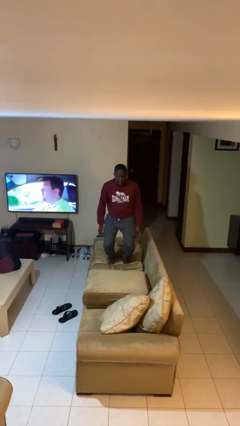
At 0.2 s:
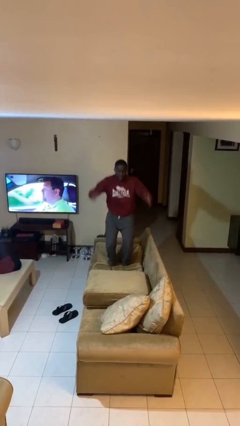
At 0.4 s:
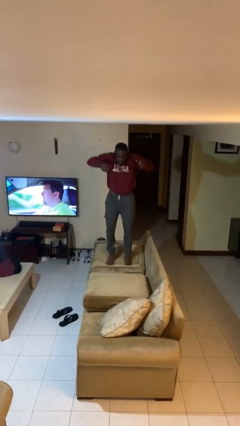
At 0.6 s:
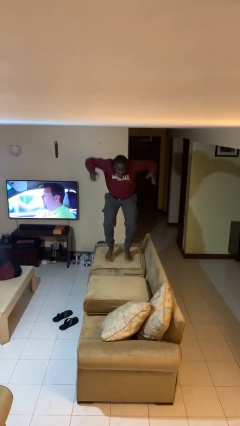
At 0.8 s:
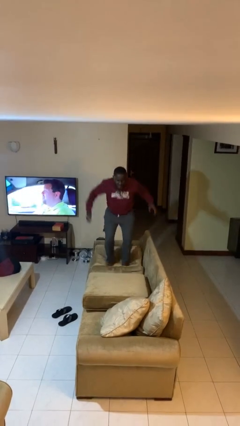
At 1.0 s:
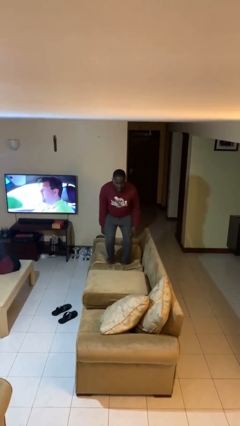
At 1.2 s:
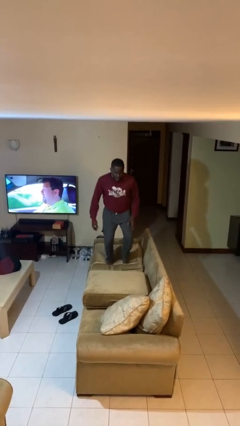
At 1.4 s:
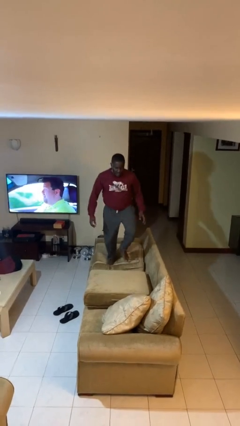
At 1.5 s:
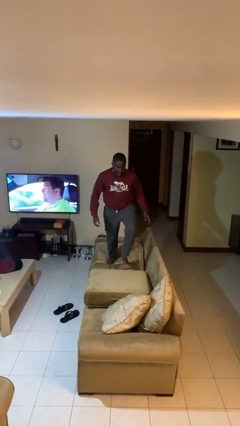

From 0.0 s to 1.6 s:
person jumps on couch

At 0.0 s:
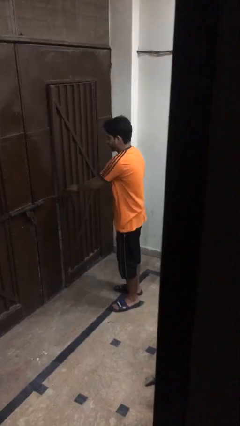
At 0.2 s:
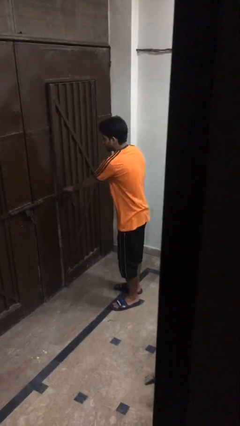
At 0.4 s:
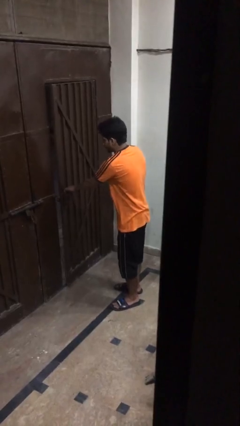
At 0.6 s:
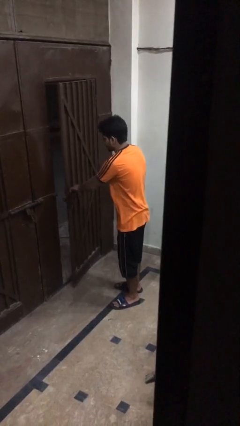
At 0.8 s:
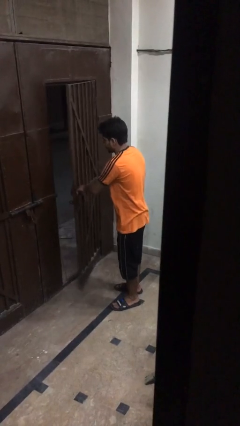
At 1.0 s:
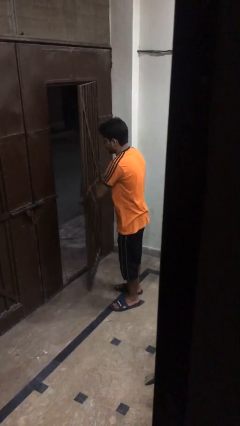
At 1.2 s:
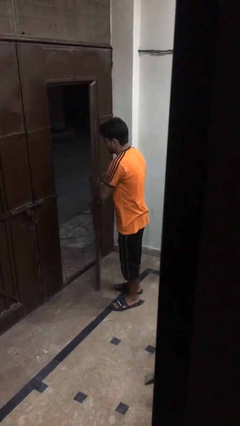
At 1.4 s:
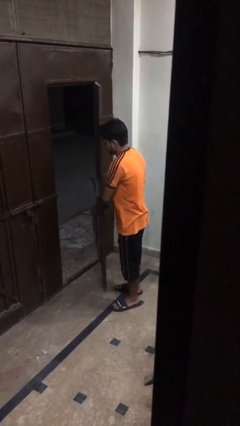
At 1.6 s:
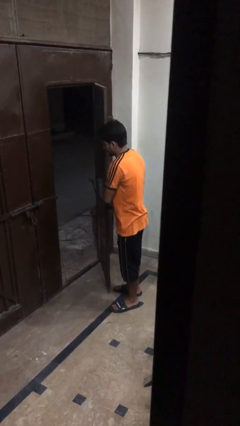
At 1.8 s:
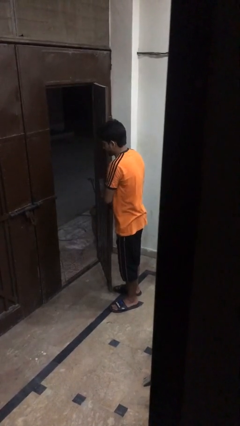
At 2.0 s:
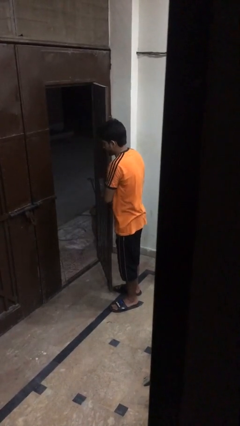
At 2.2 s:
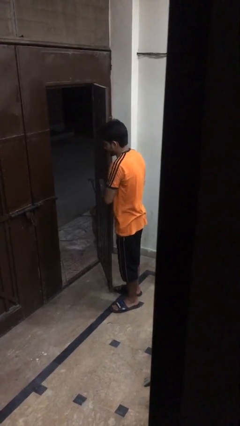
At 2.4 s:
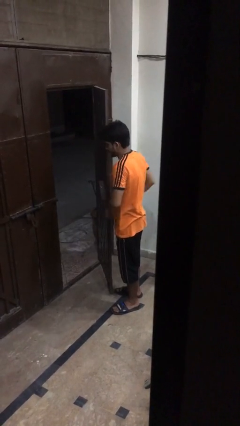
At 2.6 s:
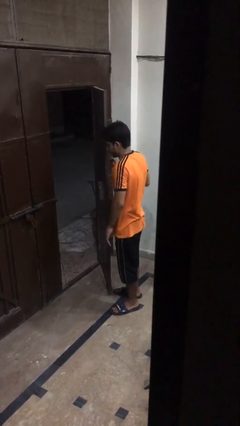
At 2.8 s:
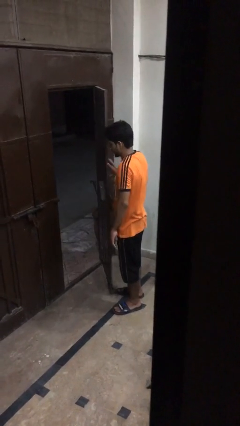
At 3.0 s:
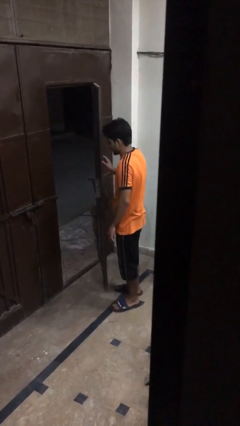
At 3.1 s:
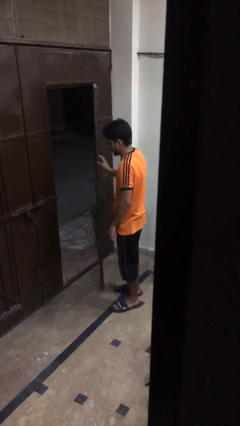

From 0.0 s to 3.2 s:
person opens gate

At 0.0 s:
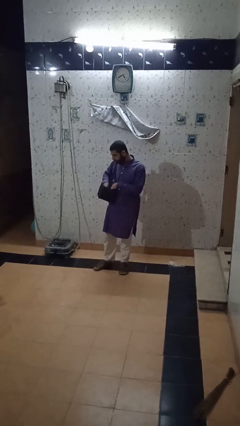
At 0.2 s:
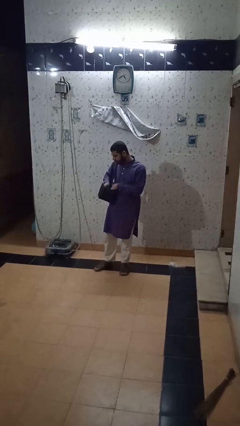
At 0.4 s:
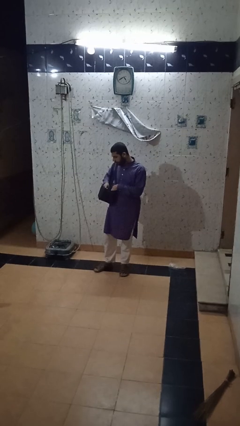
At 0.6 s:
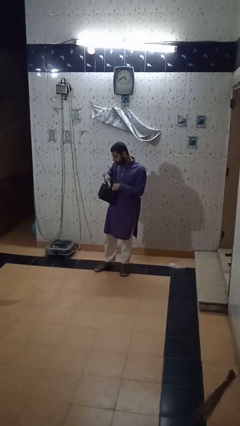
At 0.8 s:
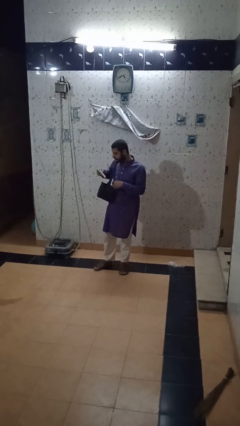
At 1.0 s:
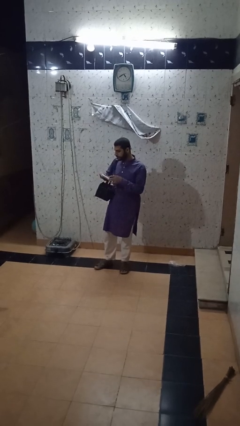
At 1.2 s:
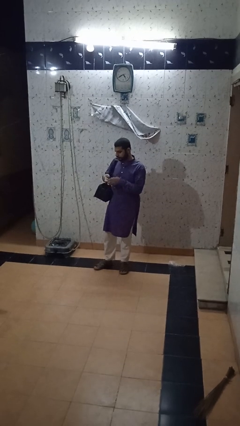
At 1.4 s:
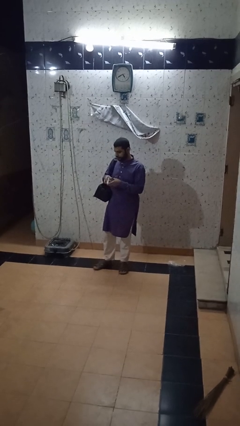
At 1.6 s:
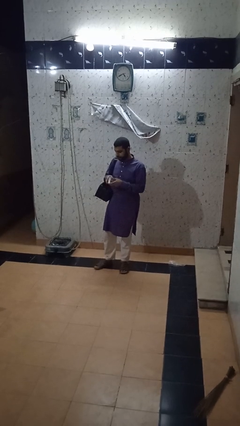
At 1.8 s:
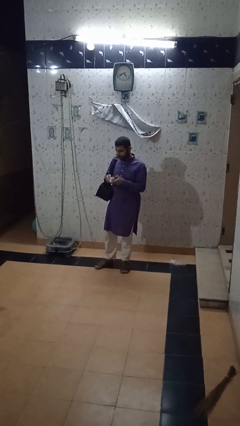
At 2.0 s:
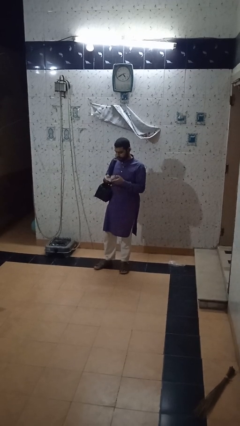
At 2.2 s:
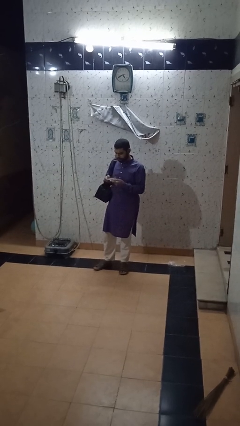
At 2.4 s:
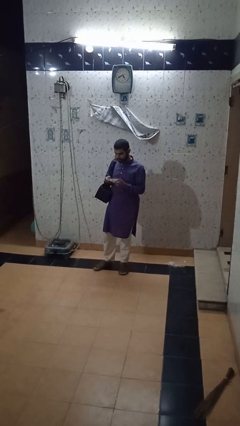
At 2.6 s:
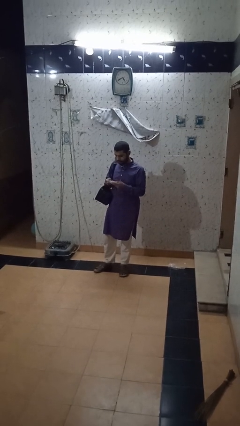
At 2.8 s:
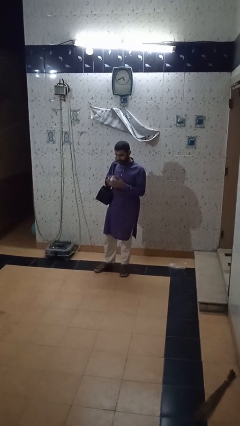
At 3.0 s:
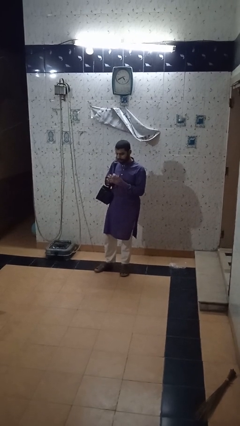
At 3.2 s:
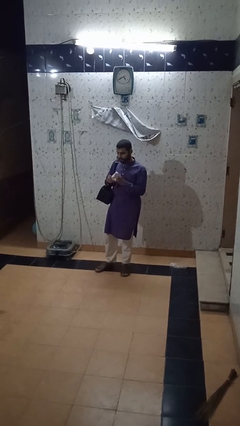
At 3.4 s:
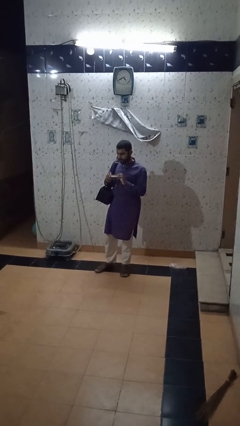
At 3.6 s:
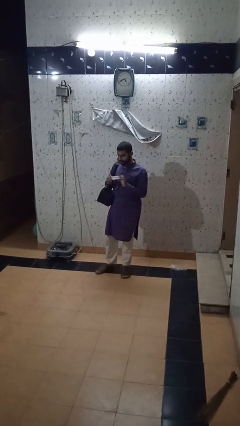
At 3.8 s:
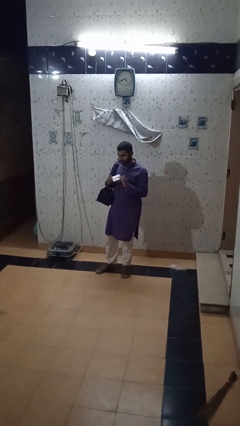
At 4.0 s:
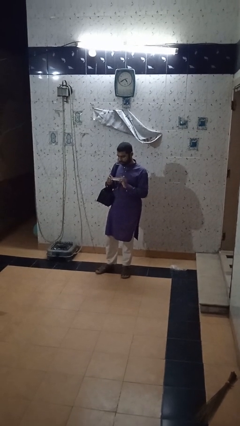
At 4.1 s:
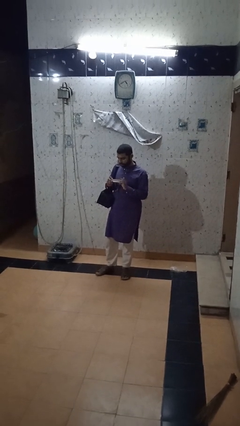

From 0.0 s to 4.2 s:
person takes object from backpack

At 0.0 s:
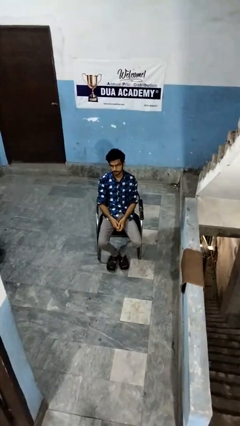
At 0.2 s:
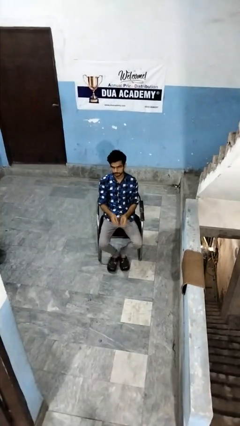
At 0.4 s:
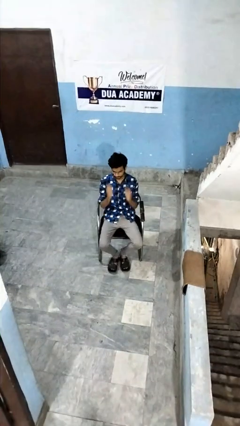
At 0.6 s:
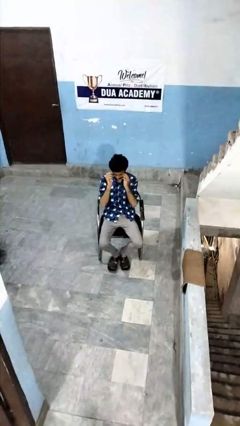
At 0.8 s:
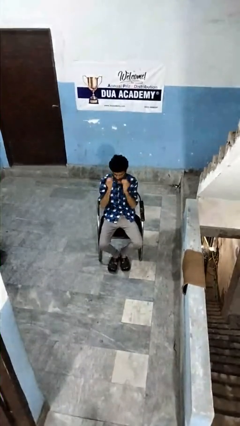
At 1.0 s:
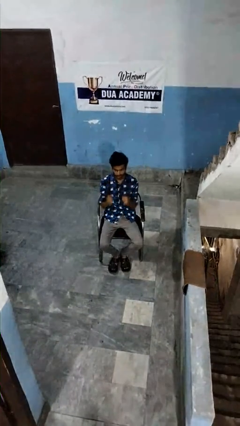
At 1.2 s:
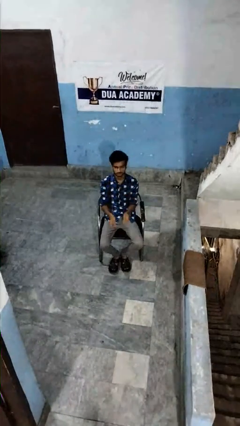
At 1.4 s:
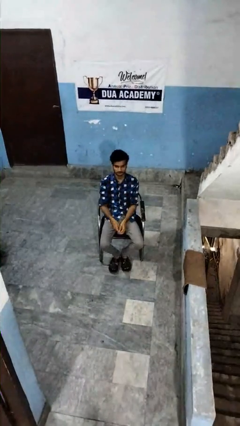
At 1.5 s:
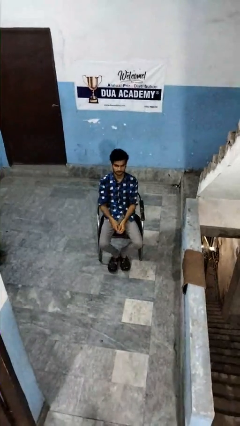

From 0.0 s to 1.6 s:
person takes off glasses

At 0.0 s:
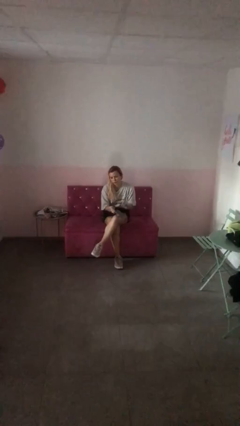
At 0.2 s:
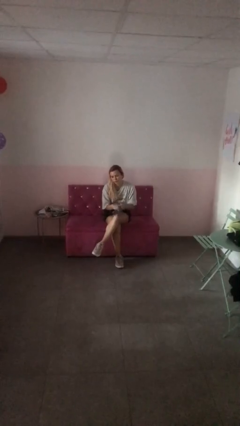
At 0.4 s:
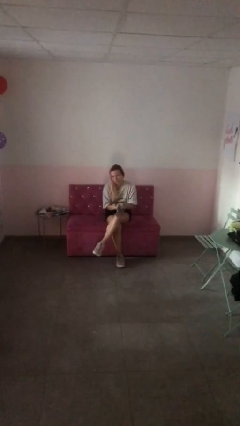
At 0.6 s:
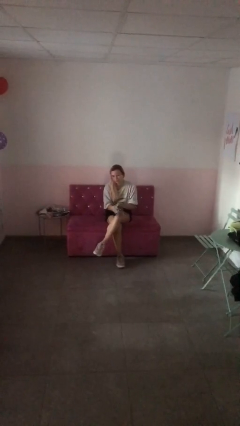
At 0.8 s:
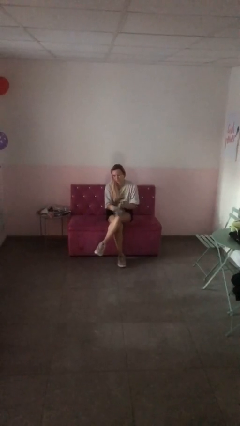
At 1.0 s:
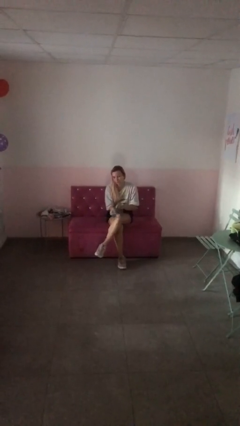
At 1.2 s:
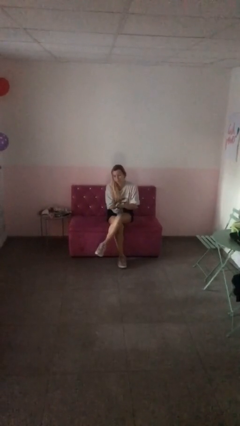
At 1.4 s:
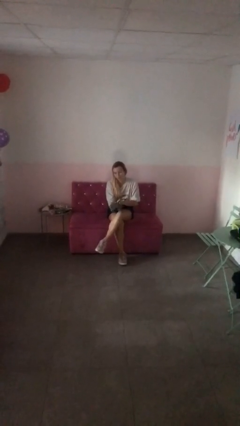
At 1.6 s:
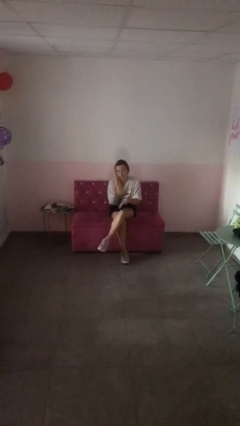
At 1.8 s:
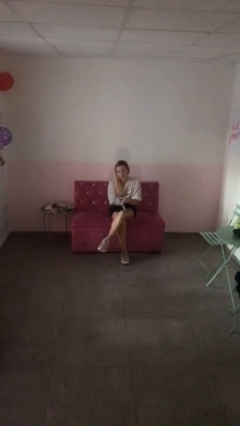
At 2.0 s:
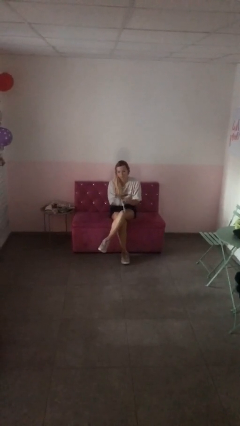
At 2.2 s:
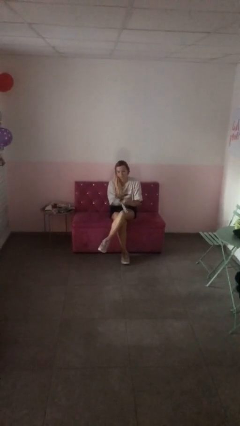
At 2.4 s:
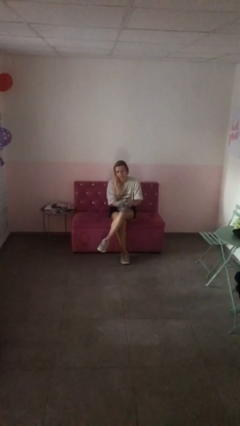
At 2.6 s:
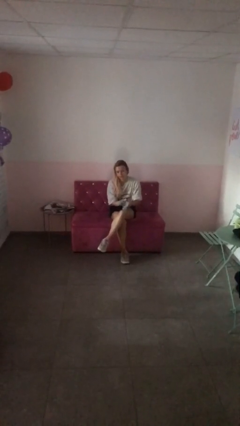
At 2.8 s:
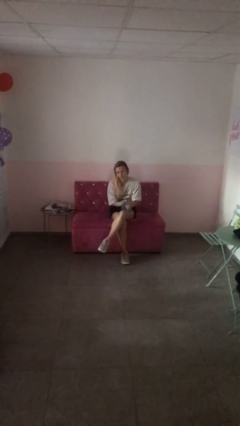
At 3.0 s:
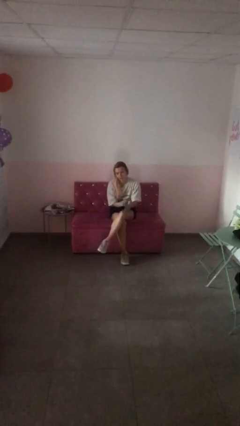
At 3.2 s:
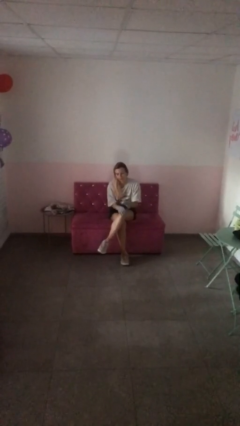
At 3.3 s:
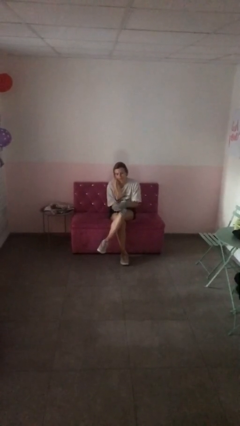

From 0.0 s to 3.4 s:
person puts on gloves

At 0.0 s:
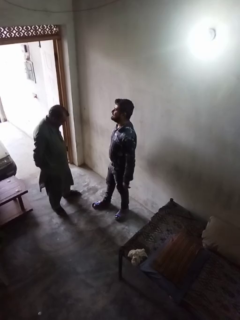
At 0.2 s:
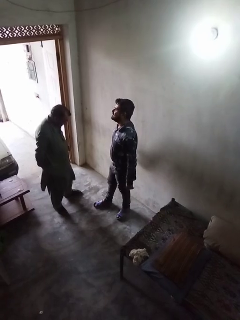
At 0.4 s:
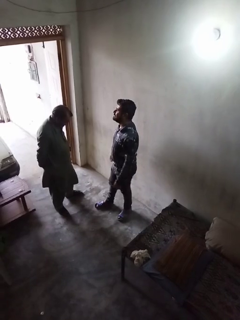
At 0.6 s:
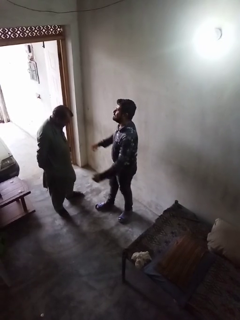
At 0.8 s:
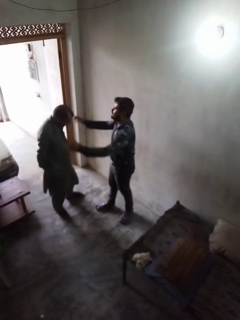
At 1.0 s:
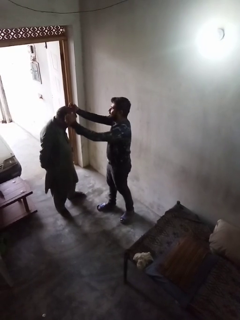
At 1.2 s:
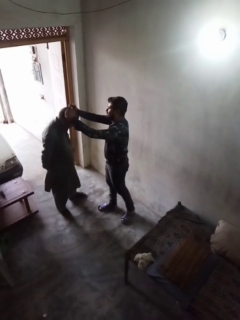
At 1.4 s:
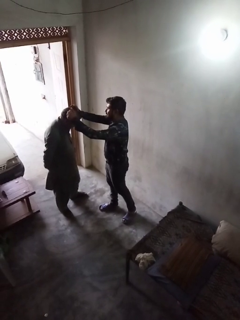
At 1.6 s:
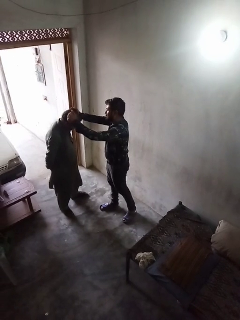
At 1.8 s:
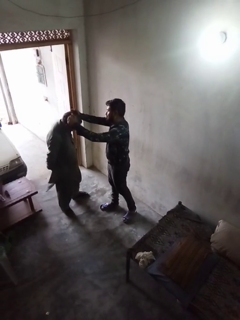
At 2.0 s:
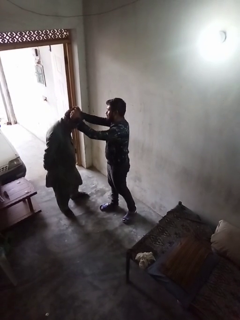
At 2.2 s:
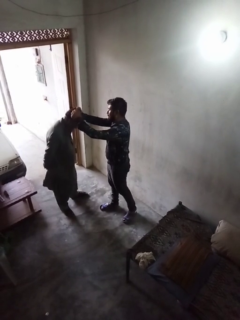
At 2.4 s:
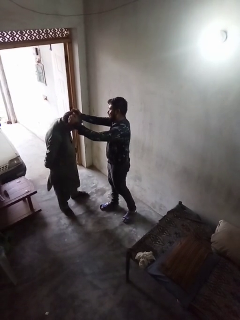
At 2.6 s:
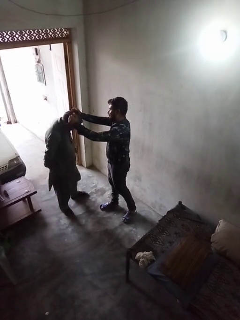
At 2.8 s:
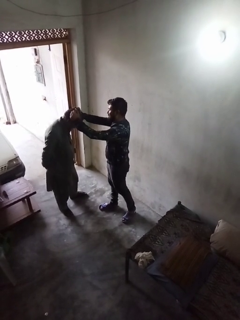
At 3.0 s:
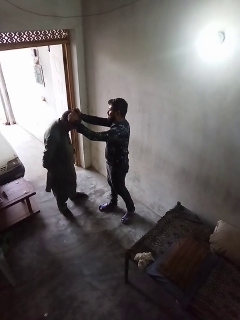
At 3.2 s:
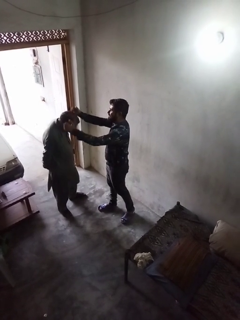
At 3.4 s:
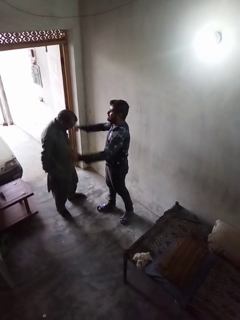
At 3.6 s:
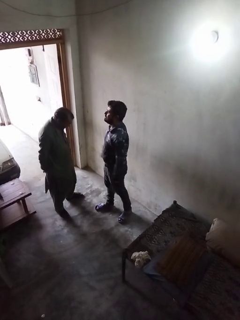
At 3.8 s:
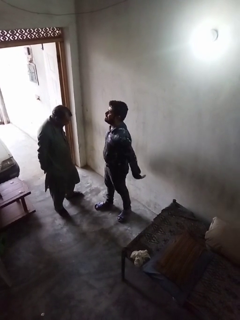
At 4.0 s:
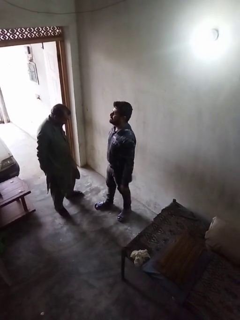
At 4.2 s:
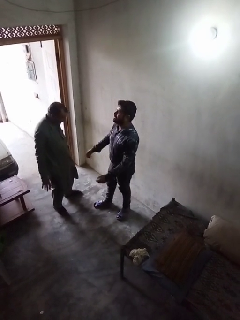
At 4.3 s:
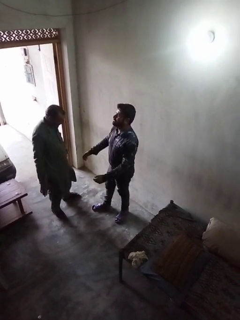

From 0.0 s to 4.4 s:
person grabs person by hair
